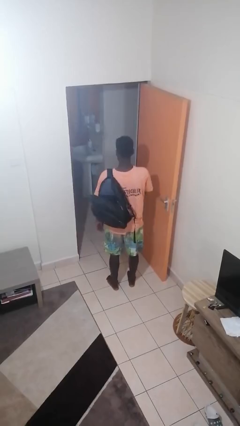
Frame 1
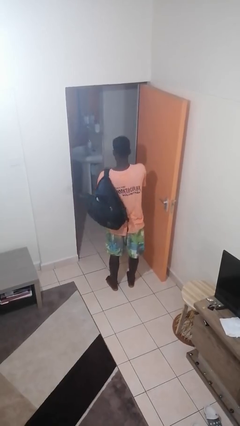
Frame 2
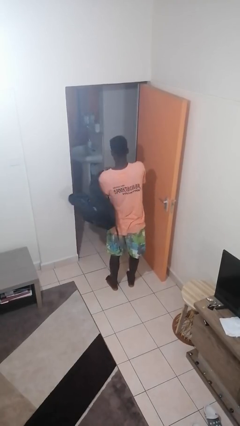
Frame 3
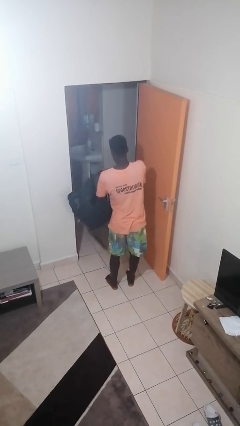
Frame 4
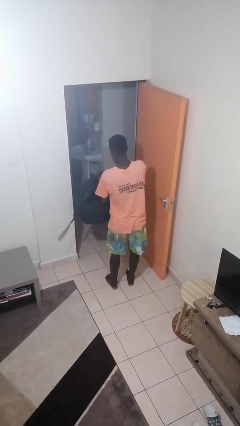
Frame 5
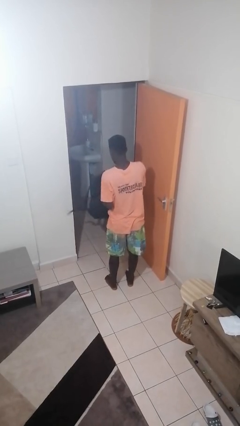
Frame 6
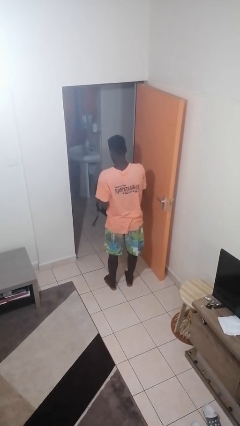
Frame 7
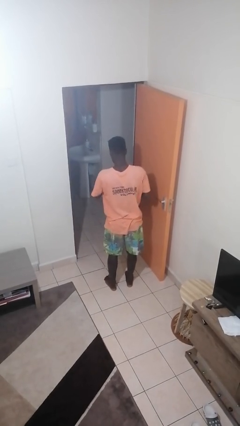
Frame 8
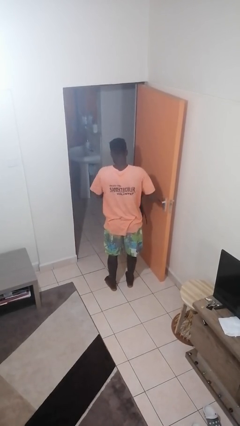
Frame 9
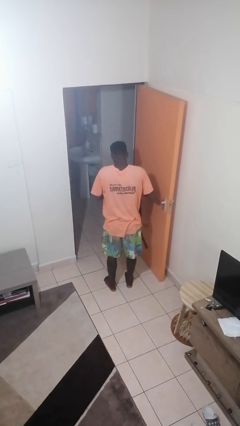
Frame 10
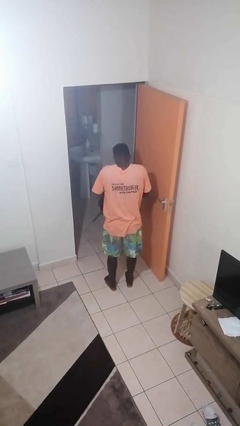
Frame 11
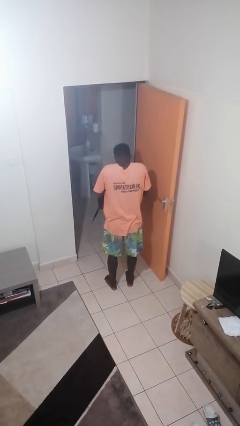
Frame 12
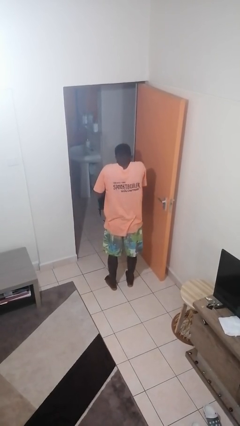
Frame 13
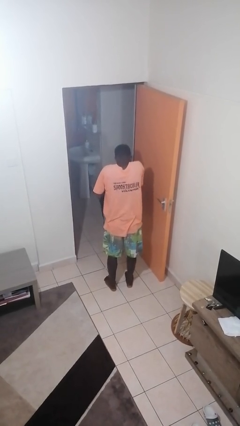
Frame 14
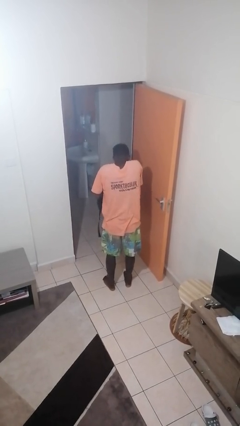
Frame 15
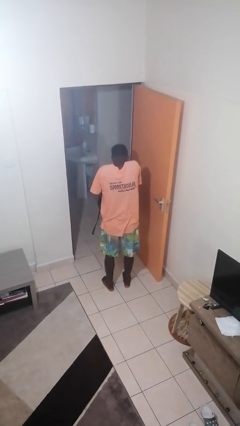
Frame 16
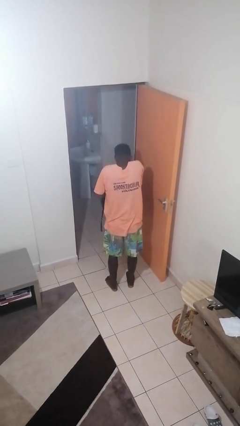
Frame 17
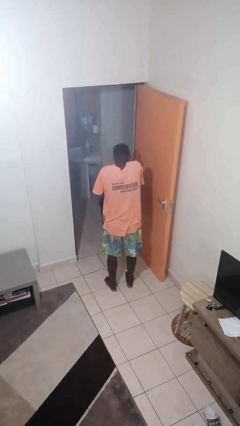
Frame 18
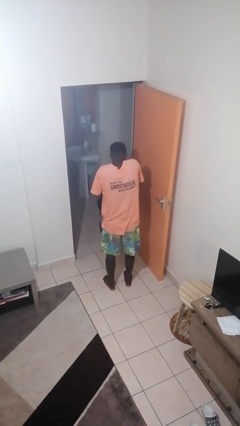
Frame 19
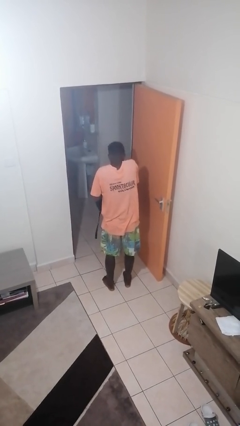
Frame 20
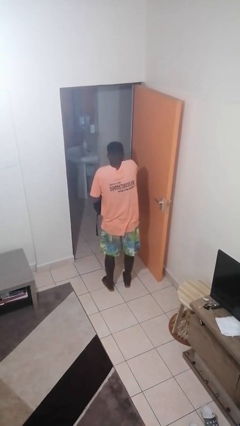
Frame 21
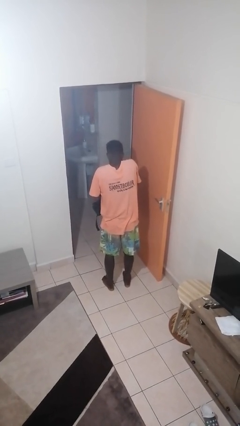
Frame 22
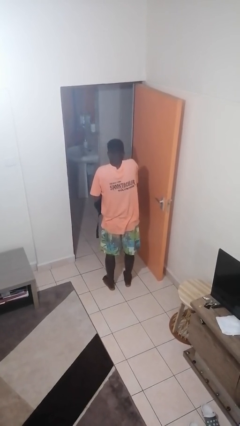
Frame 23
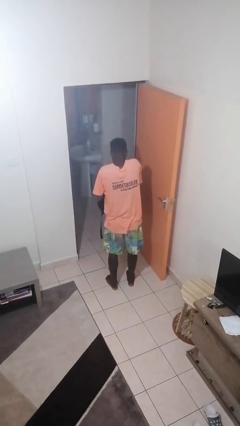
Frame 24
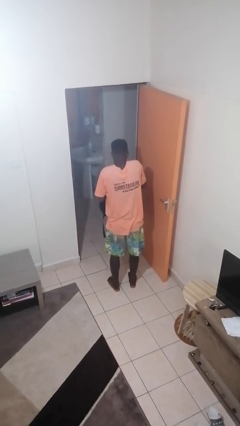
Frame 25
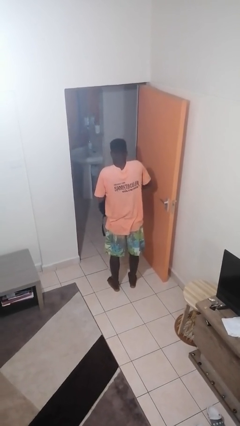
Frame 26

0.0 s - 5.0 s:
person searches in backpack

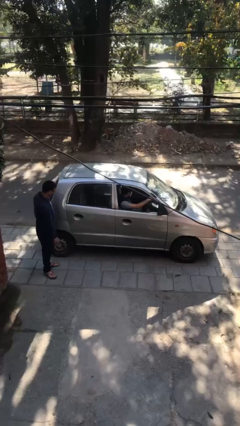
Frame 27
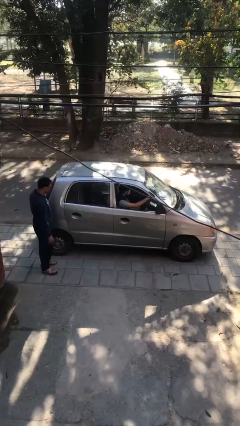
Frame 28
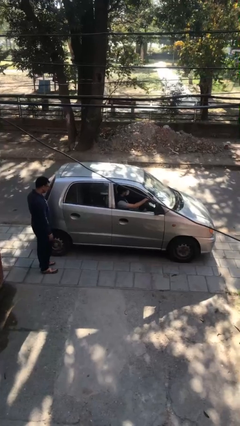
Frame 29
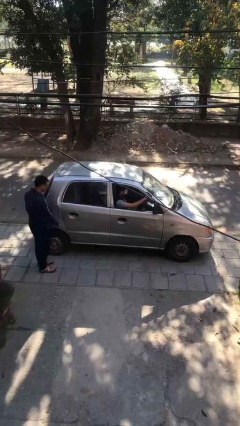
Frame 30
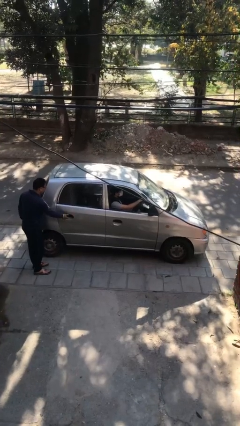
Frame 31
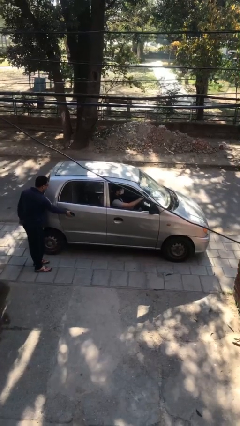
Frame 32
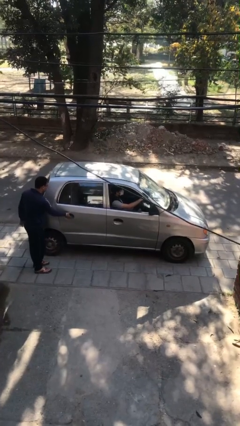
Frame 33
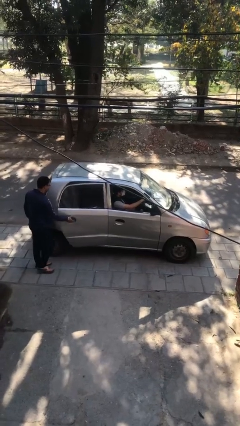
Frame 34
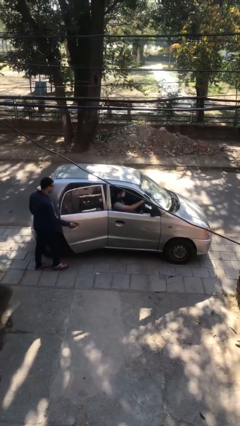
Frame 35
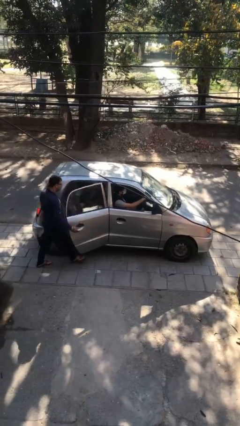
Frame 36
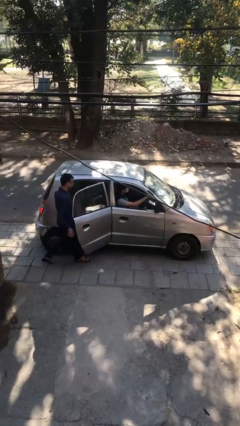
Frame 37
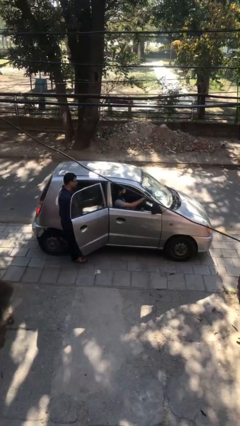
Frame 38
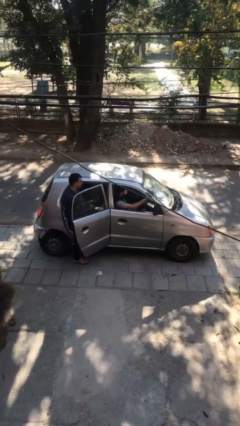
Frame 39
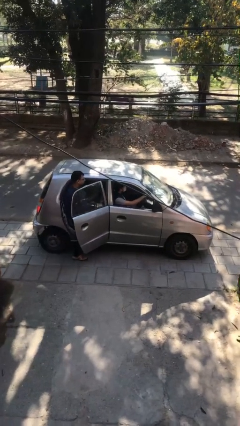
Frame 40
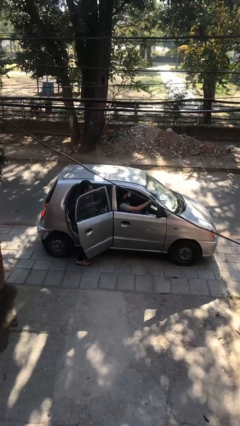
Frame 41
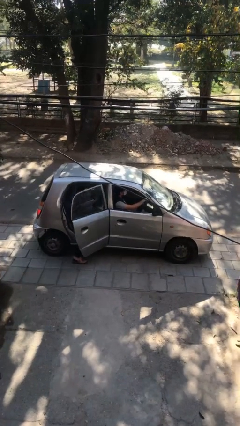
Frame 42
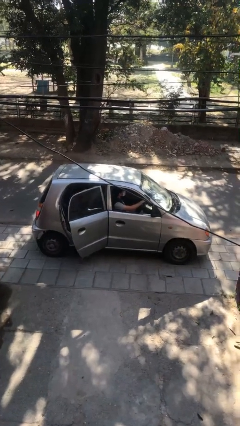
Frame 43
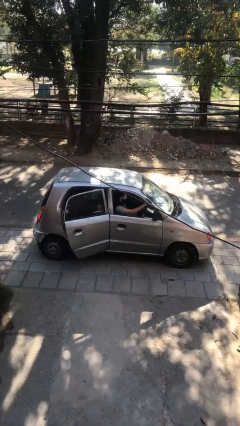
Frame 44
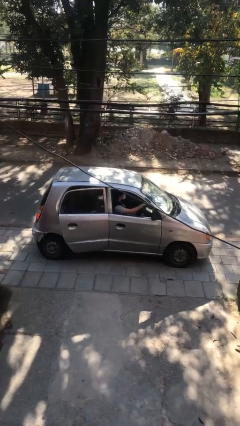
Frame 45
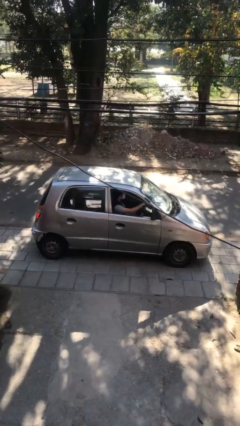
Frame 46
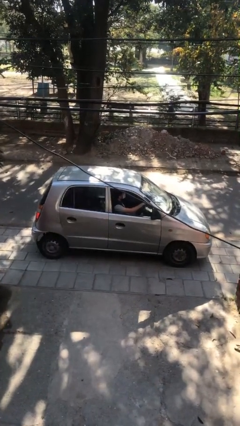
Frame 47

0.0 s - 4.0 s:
car picks up person

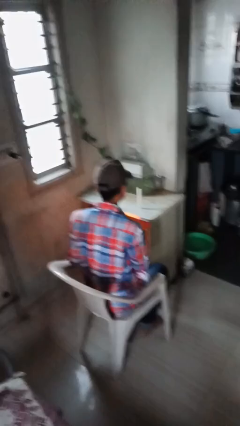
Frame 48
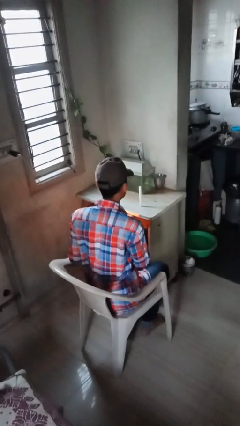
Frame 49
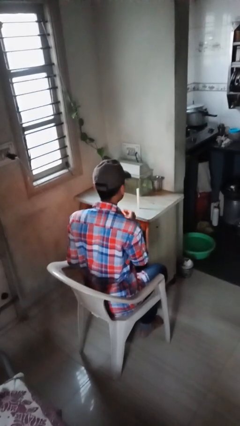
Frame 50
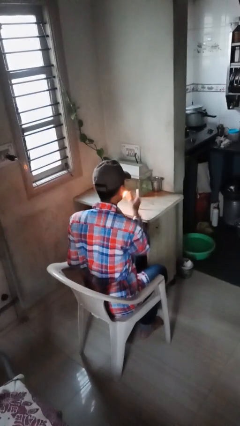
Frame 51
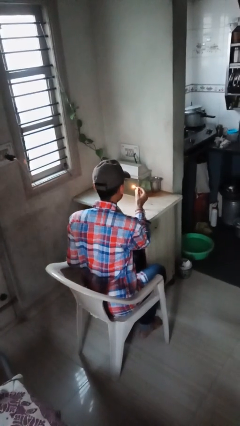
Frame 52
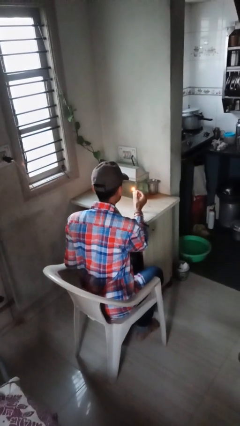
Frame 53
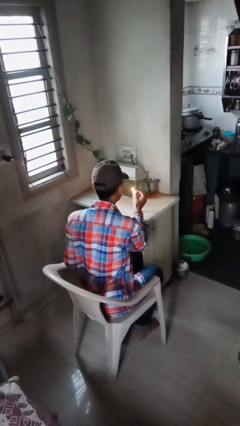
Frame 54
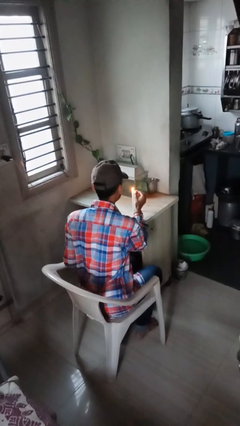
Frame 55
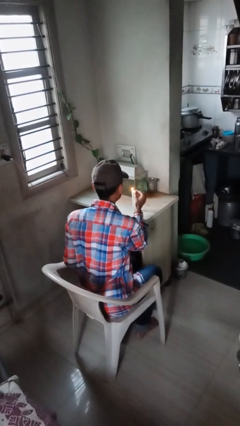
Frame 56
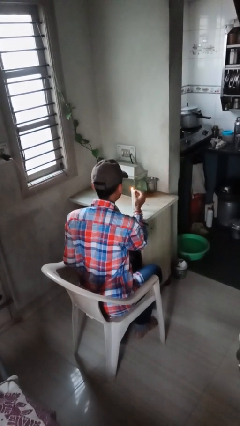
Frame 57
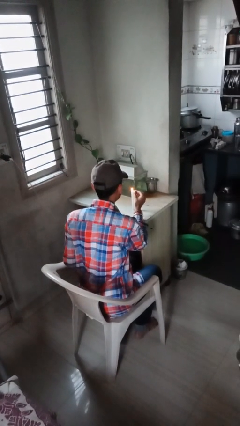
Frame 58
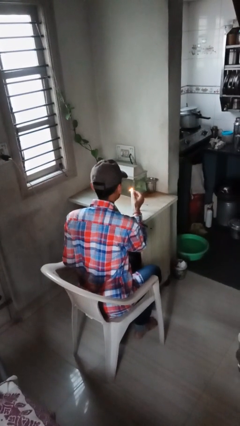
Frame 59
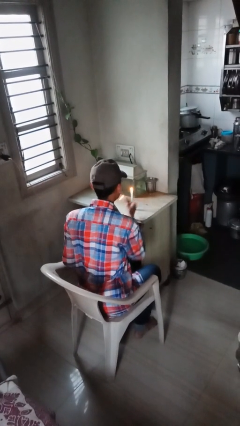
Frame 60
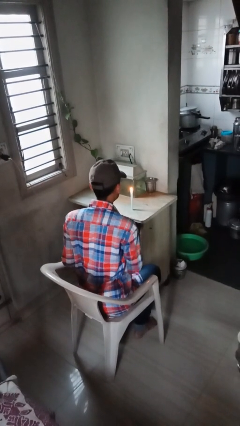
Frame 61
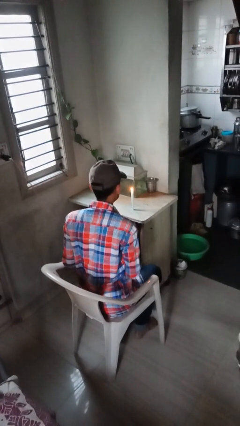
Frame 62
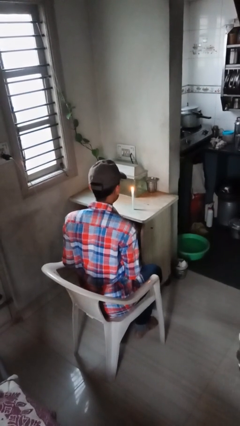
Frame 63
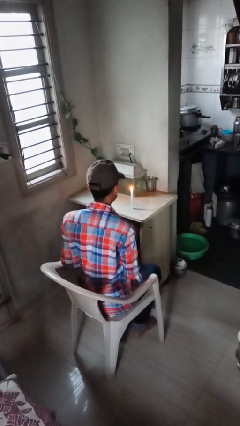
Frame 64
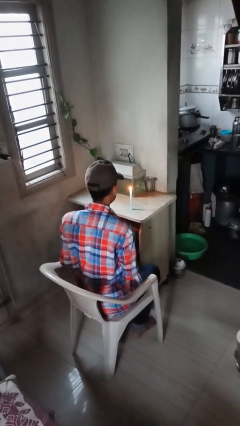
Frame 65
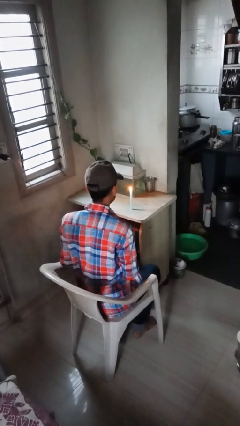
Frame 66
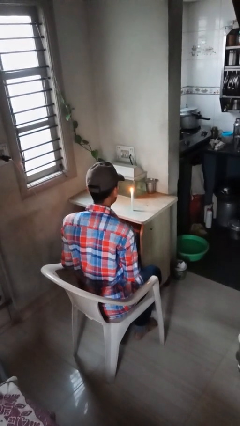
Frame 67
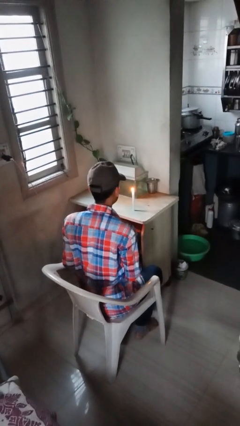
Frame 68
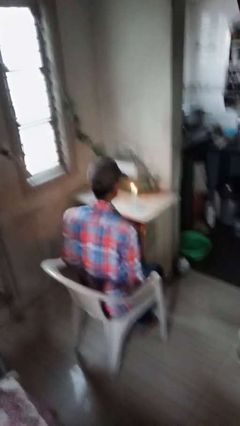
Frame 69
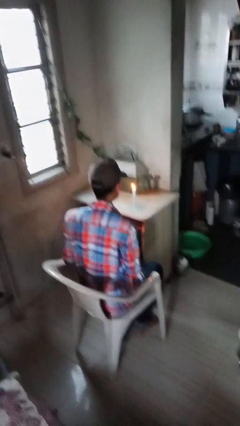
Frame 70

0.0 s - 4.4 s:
person lights candle

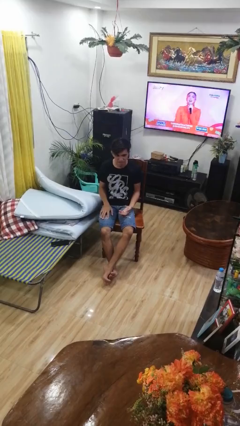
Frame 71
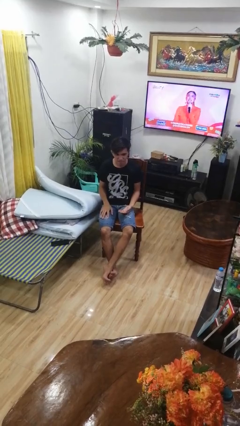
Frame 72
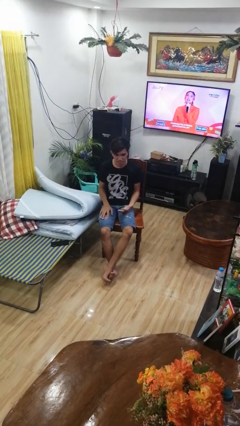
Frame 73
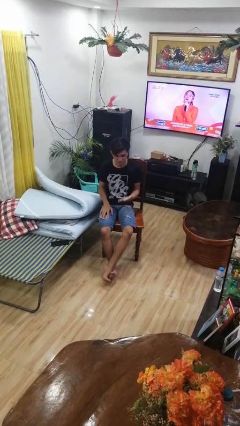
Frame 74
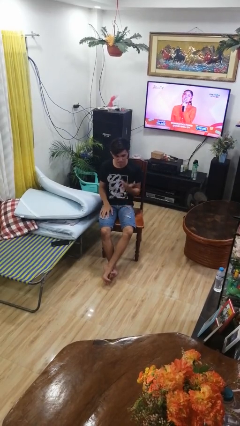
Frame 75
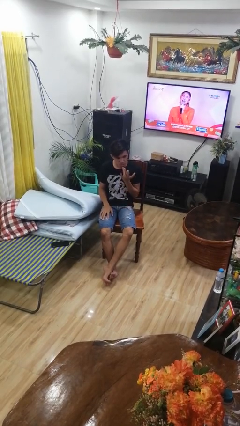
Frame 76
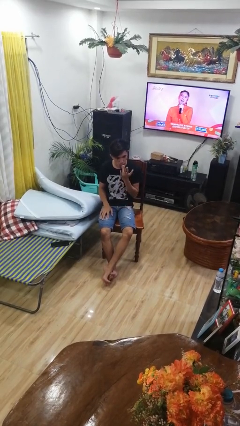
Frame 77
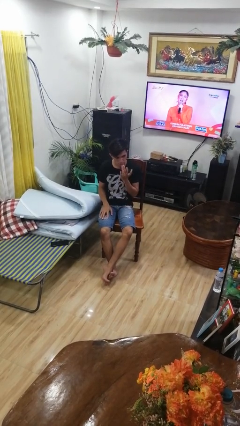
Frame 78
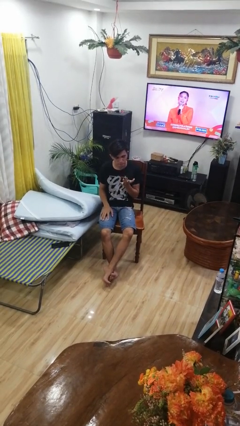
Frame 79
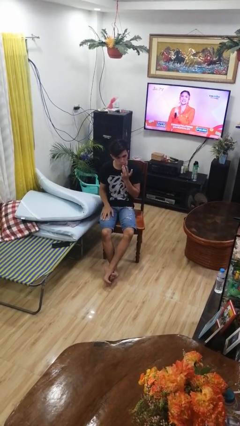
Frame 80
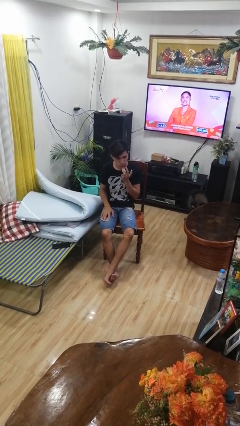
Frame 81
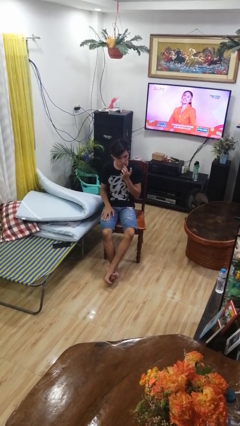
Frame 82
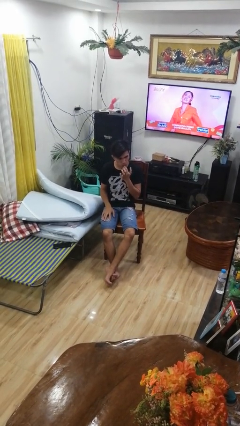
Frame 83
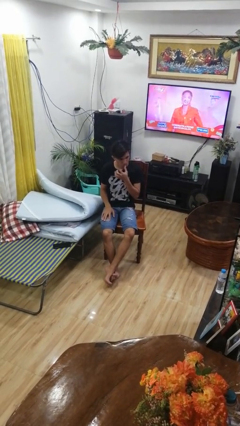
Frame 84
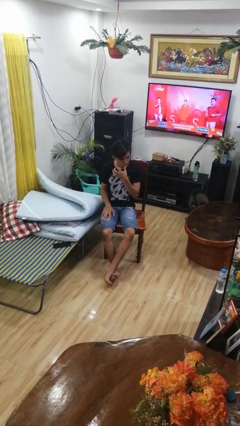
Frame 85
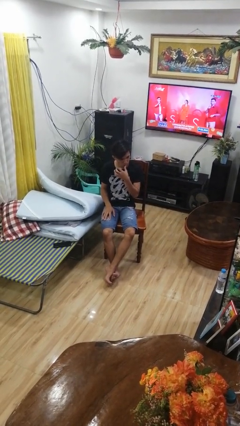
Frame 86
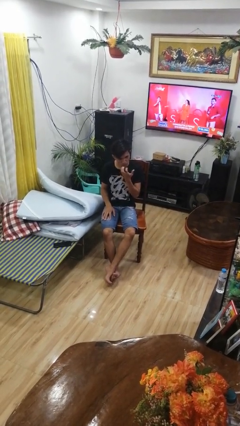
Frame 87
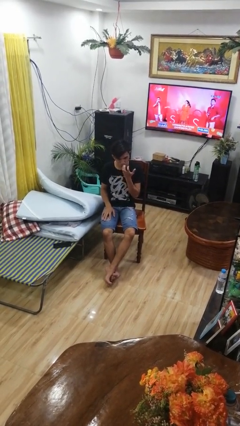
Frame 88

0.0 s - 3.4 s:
person licks fingers

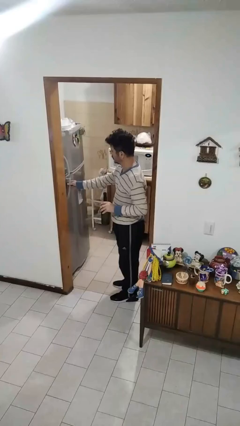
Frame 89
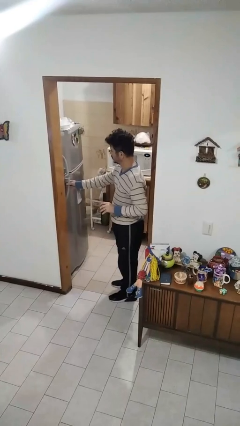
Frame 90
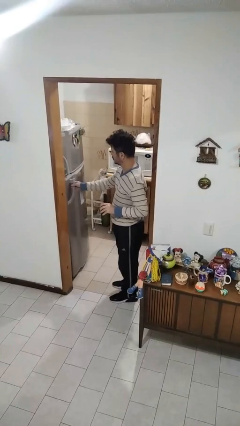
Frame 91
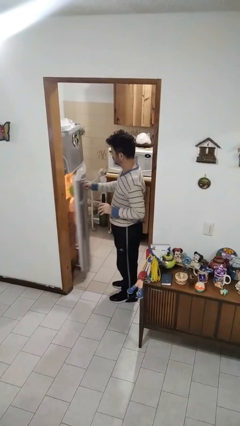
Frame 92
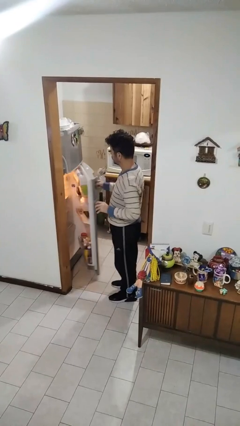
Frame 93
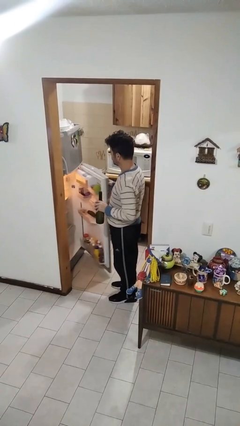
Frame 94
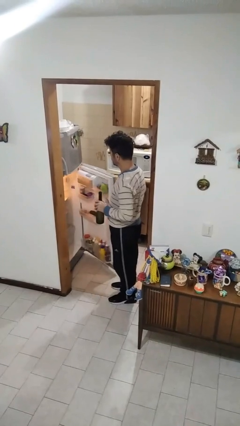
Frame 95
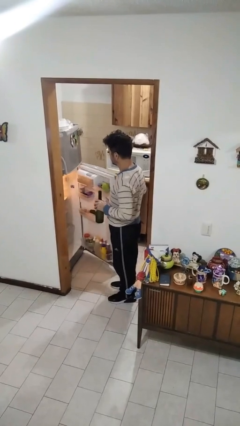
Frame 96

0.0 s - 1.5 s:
person opens refrigerator
